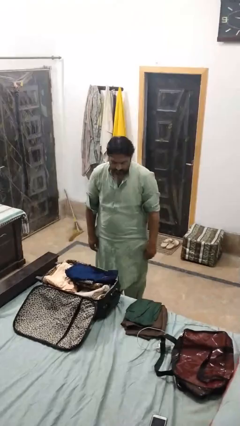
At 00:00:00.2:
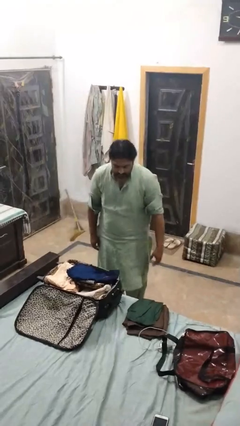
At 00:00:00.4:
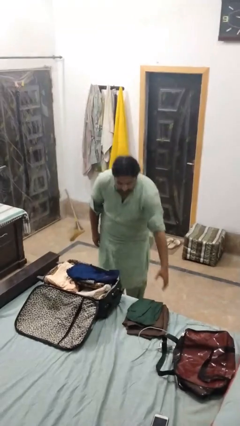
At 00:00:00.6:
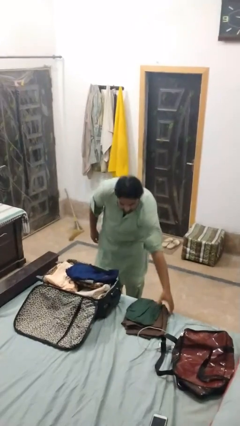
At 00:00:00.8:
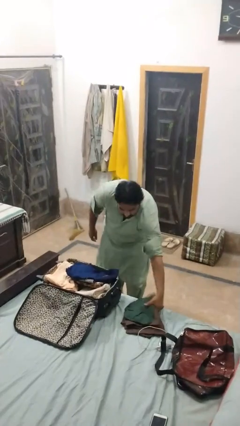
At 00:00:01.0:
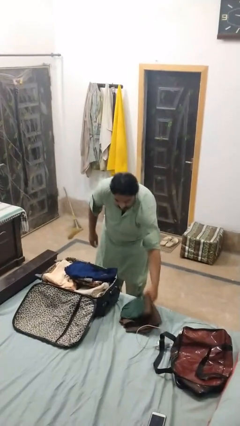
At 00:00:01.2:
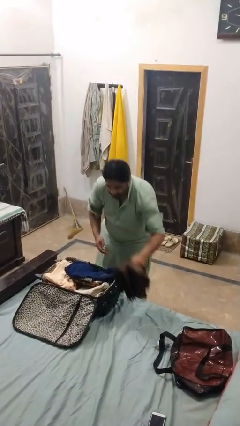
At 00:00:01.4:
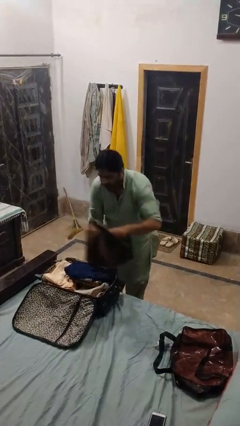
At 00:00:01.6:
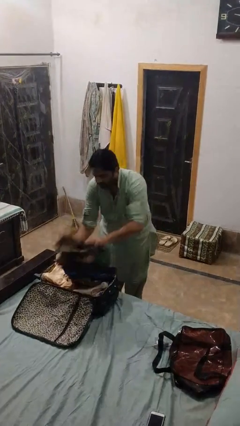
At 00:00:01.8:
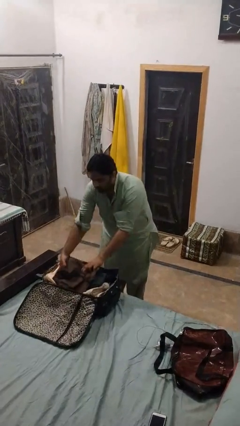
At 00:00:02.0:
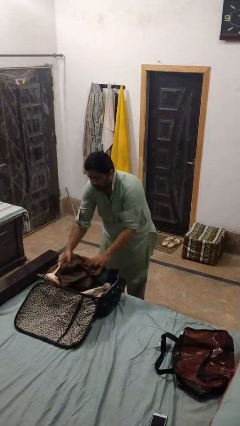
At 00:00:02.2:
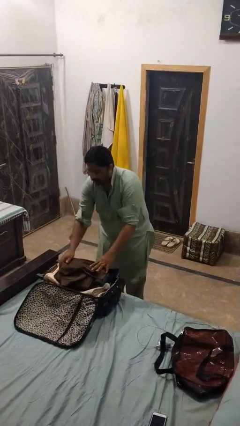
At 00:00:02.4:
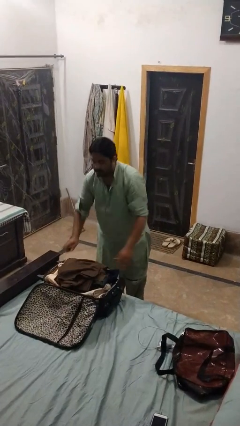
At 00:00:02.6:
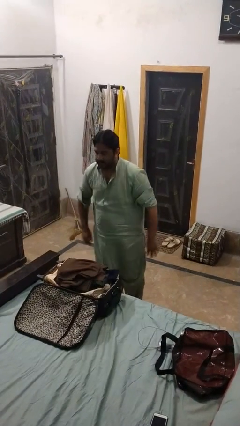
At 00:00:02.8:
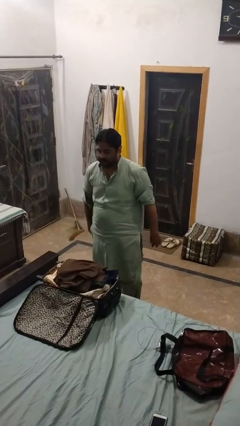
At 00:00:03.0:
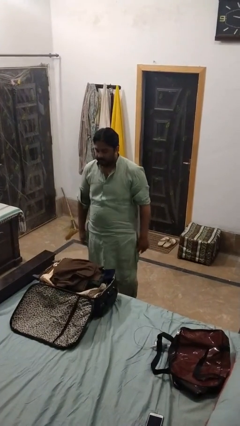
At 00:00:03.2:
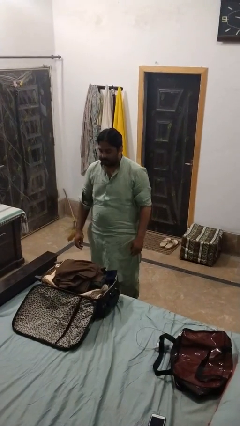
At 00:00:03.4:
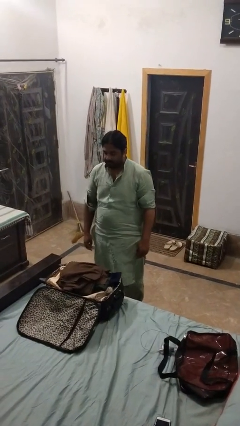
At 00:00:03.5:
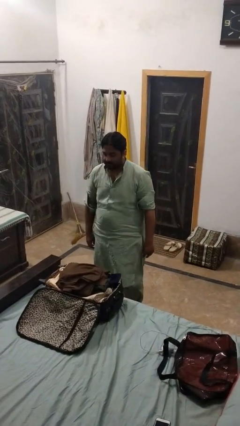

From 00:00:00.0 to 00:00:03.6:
person loads clothes into suitcase

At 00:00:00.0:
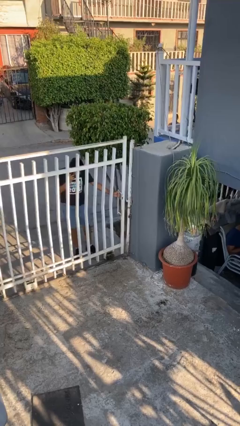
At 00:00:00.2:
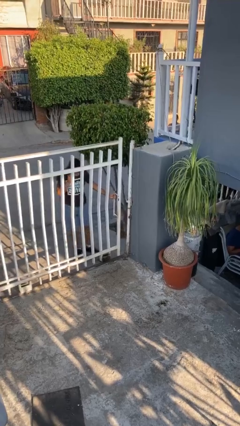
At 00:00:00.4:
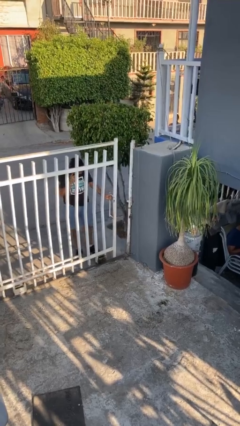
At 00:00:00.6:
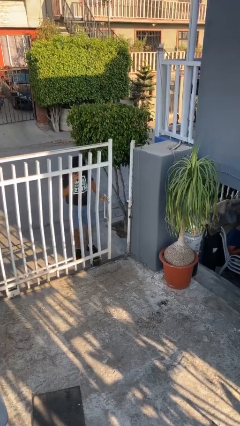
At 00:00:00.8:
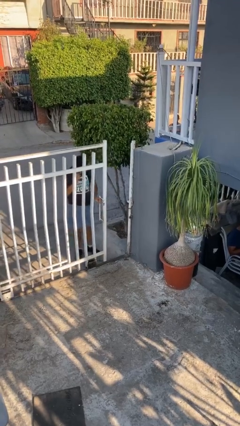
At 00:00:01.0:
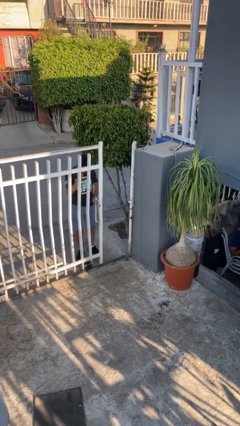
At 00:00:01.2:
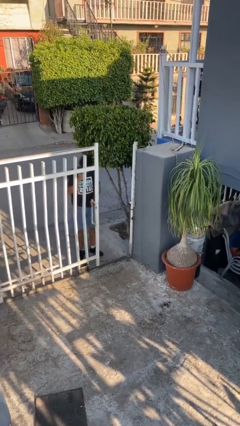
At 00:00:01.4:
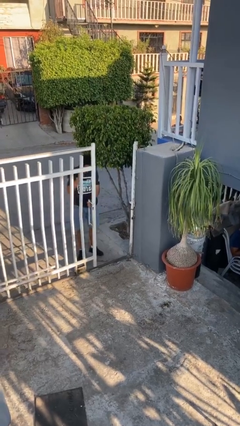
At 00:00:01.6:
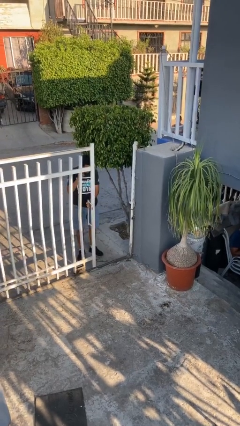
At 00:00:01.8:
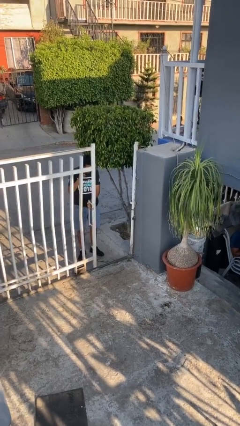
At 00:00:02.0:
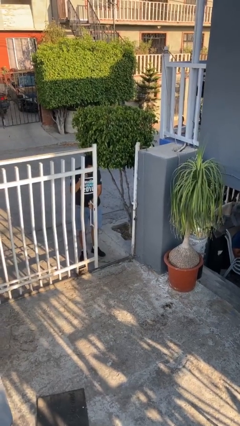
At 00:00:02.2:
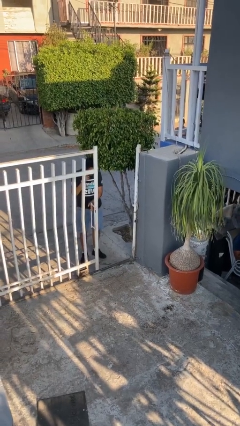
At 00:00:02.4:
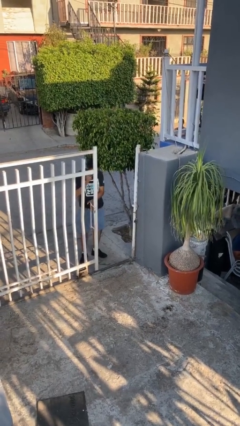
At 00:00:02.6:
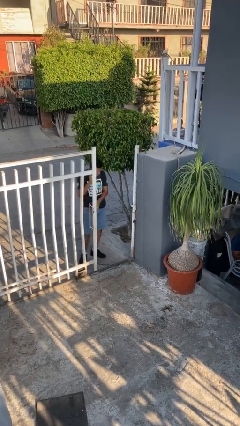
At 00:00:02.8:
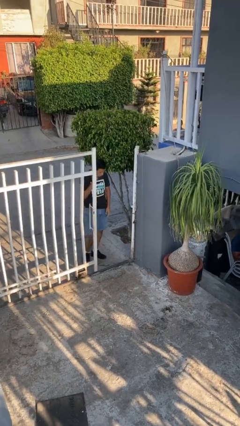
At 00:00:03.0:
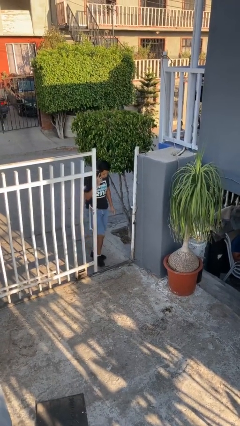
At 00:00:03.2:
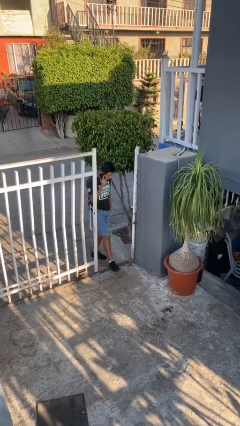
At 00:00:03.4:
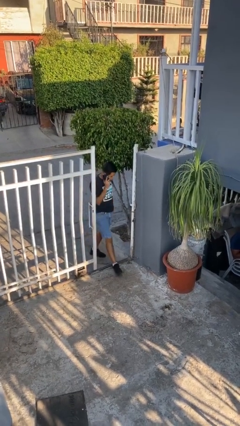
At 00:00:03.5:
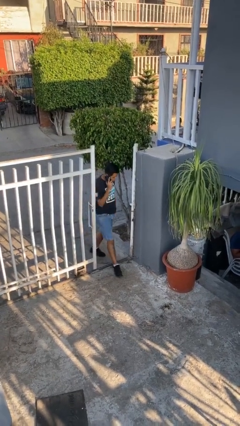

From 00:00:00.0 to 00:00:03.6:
person opens facility door

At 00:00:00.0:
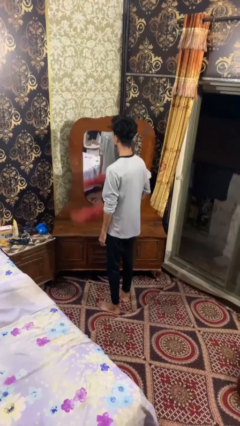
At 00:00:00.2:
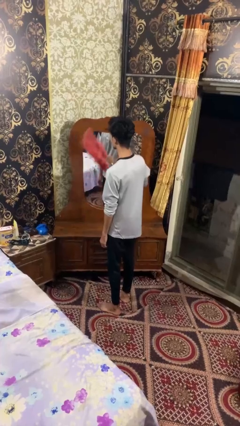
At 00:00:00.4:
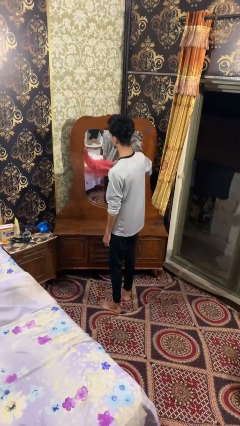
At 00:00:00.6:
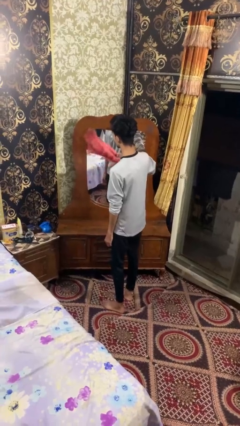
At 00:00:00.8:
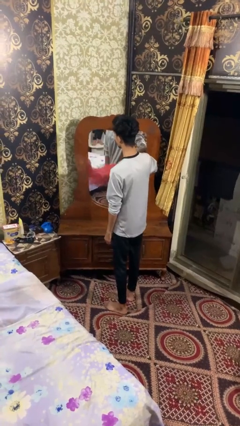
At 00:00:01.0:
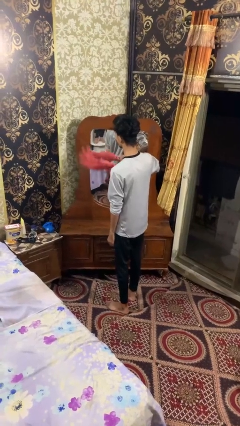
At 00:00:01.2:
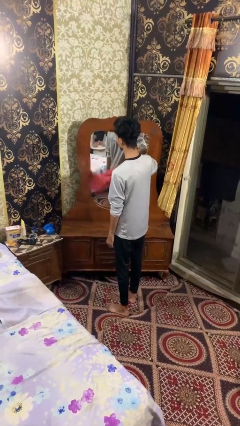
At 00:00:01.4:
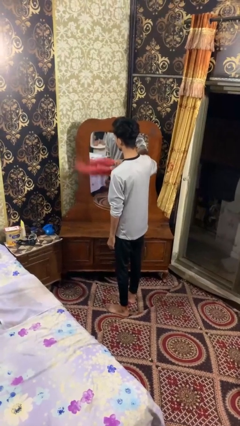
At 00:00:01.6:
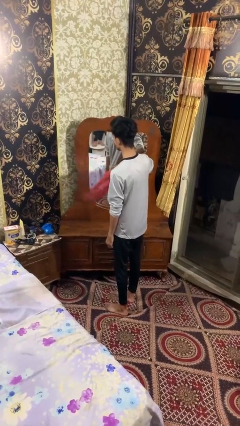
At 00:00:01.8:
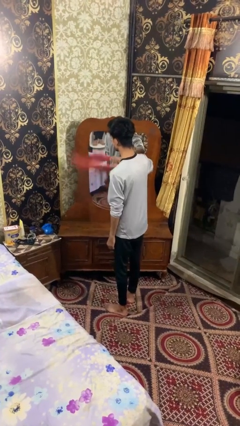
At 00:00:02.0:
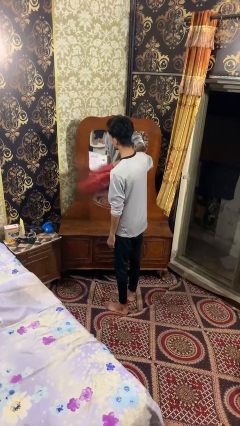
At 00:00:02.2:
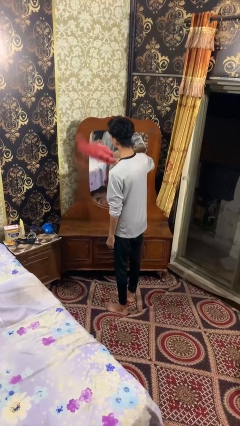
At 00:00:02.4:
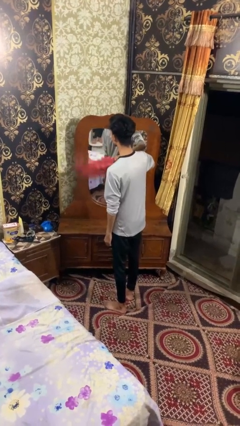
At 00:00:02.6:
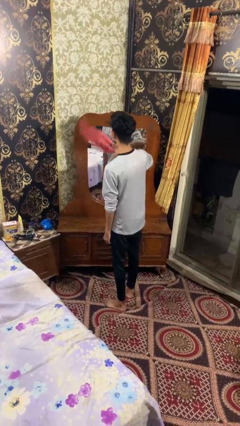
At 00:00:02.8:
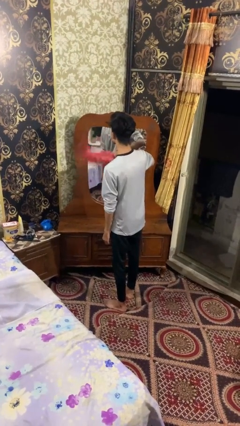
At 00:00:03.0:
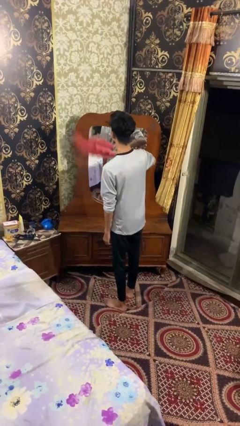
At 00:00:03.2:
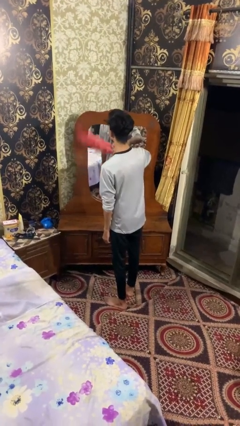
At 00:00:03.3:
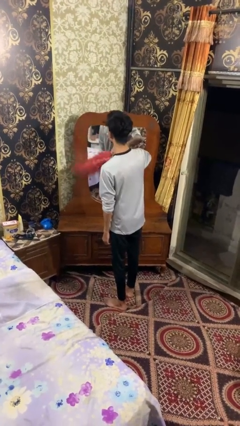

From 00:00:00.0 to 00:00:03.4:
person dusts furniture

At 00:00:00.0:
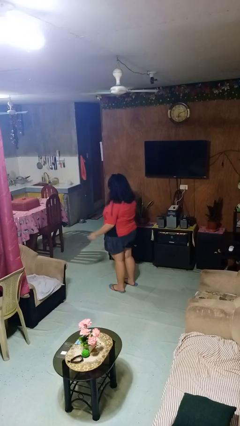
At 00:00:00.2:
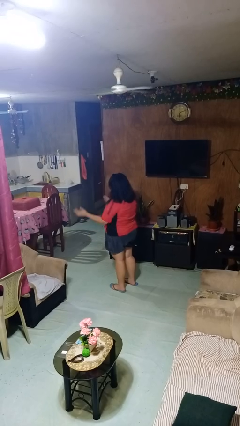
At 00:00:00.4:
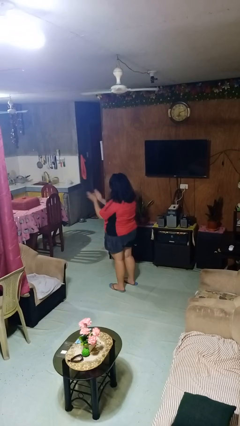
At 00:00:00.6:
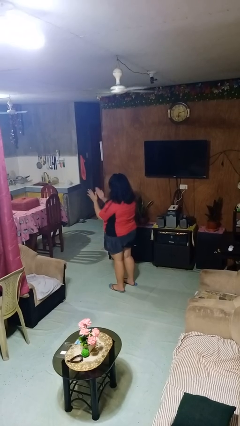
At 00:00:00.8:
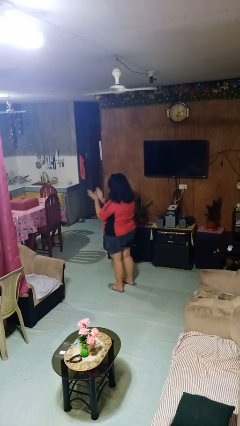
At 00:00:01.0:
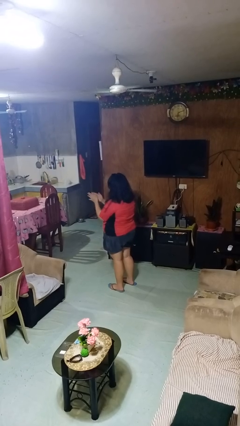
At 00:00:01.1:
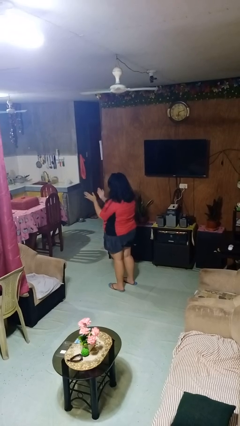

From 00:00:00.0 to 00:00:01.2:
person claps hands

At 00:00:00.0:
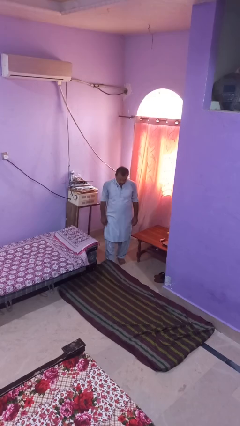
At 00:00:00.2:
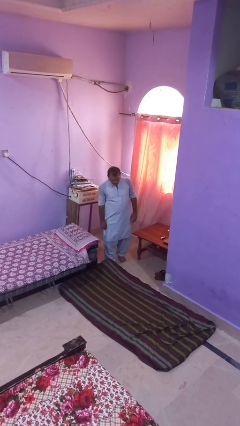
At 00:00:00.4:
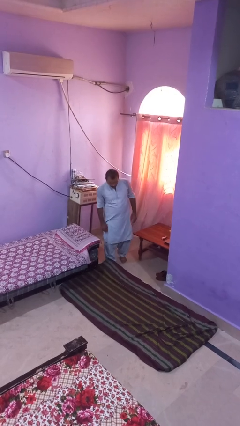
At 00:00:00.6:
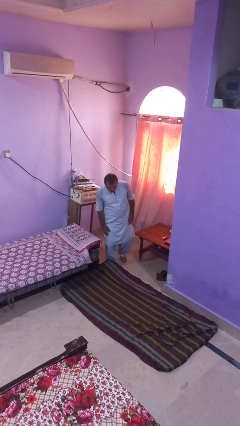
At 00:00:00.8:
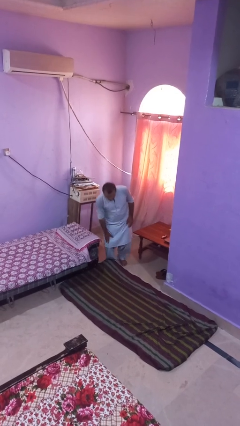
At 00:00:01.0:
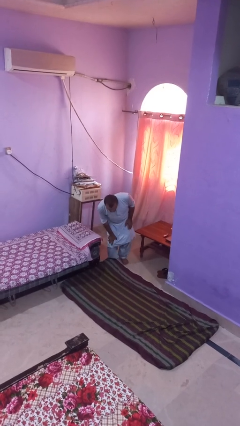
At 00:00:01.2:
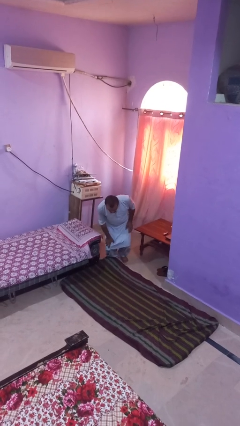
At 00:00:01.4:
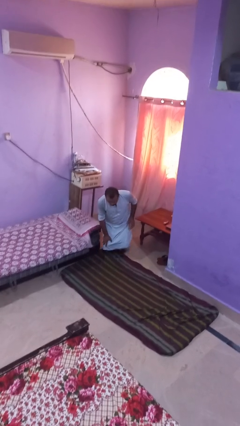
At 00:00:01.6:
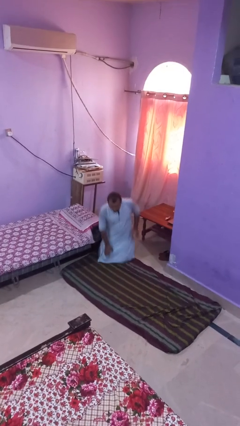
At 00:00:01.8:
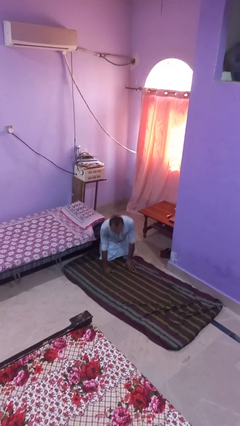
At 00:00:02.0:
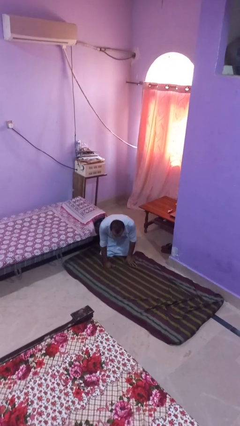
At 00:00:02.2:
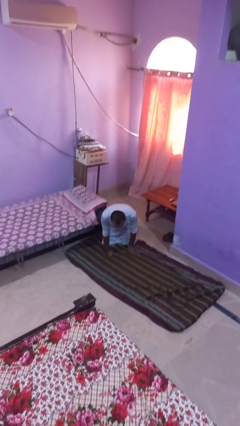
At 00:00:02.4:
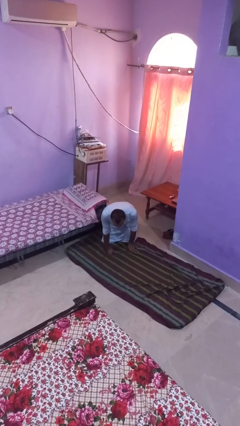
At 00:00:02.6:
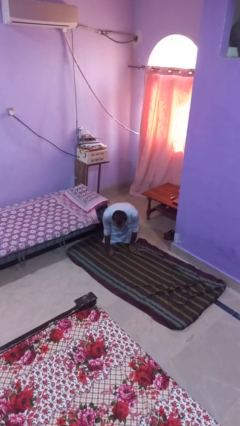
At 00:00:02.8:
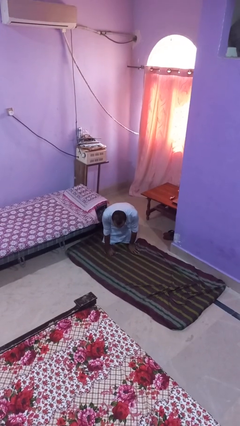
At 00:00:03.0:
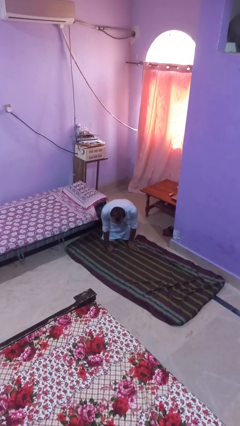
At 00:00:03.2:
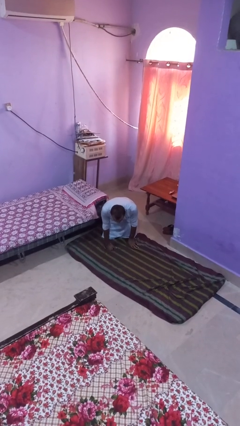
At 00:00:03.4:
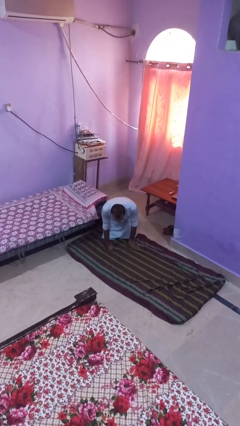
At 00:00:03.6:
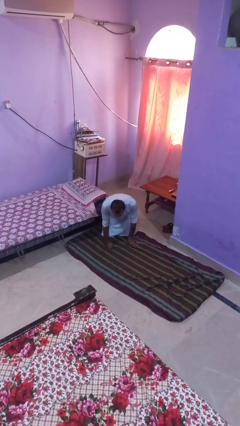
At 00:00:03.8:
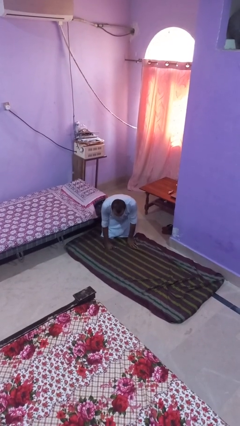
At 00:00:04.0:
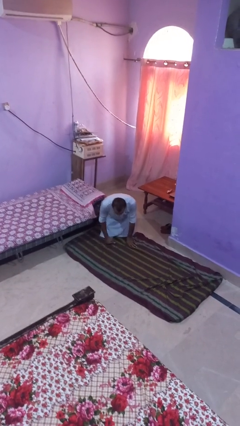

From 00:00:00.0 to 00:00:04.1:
person trips on object on floor

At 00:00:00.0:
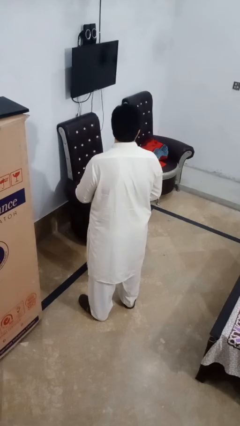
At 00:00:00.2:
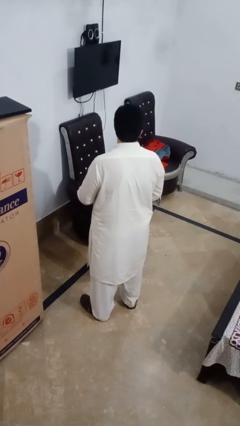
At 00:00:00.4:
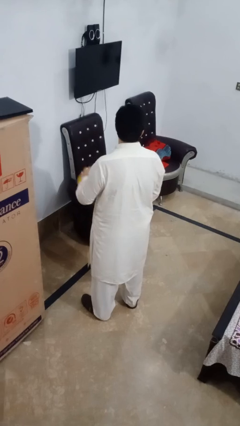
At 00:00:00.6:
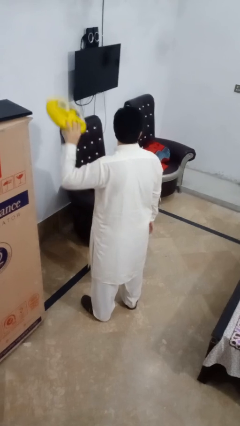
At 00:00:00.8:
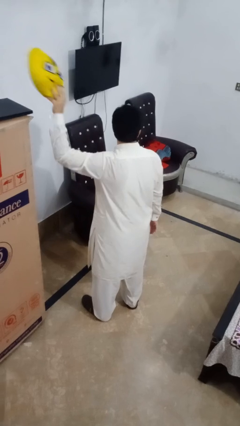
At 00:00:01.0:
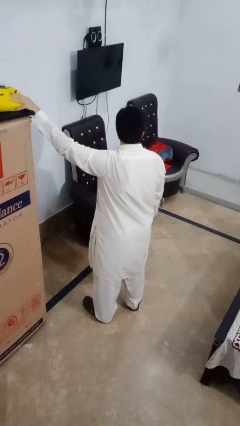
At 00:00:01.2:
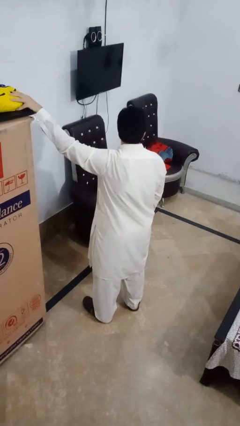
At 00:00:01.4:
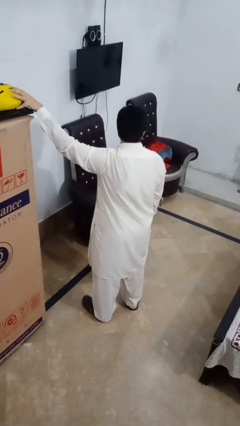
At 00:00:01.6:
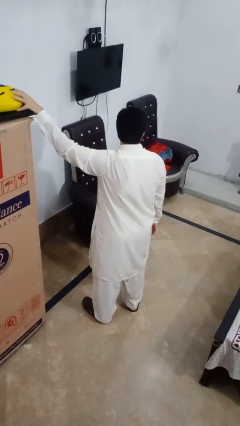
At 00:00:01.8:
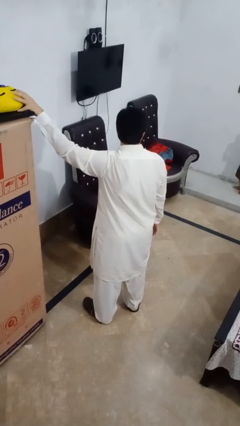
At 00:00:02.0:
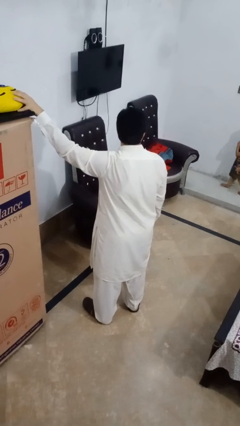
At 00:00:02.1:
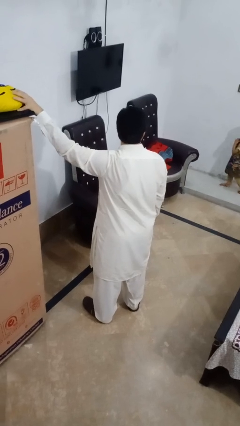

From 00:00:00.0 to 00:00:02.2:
person puts down object on shelf
